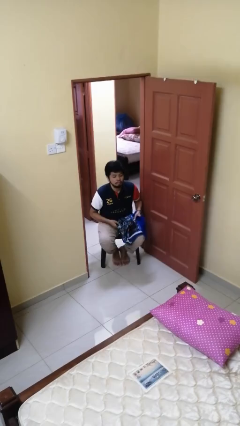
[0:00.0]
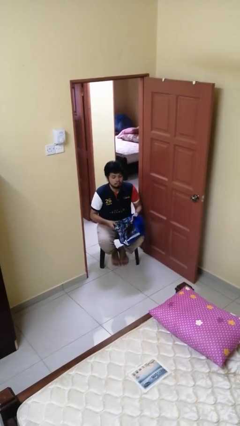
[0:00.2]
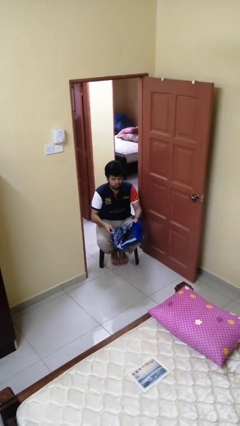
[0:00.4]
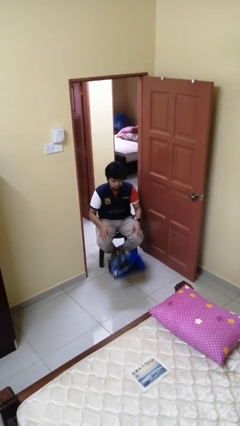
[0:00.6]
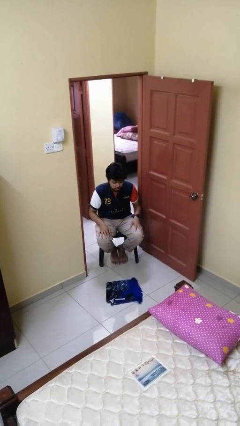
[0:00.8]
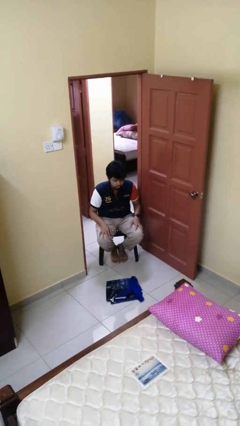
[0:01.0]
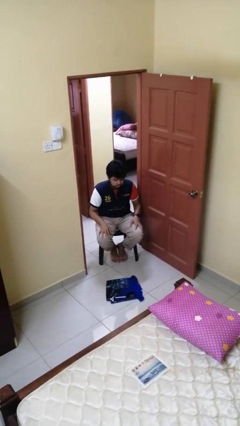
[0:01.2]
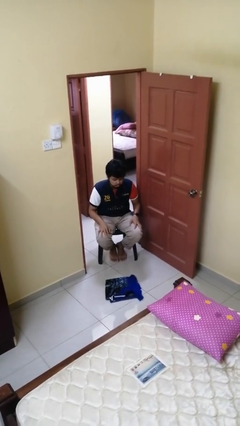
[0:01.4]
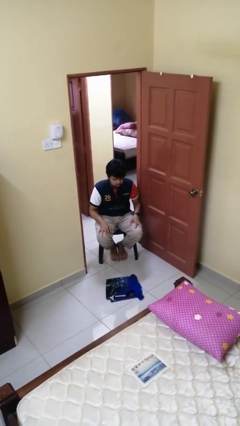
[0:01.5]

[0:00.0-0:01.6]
person drops object

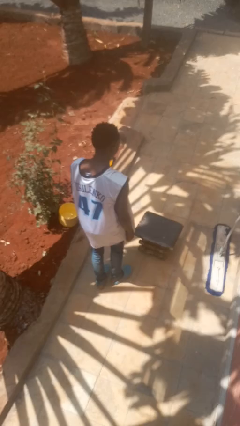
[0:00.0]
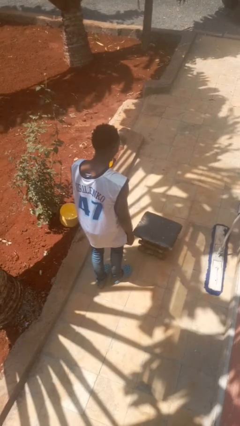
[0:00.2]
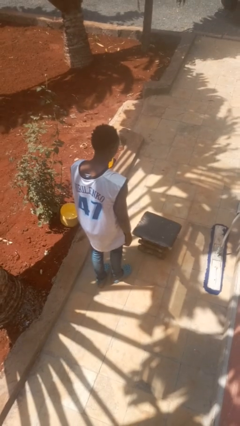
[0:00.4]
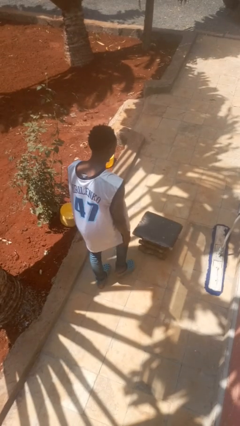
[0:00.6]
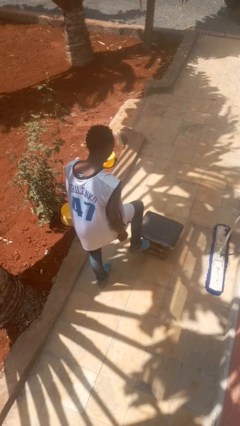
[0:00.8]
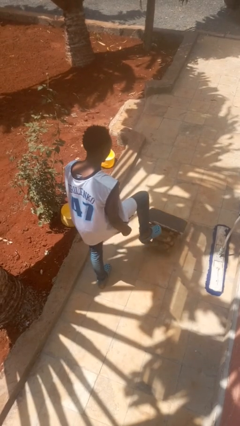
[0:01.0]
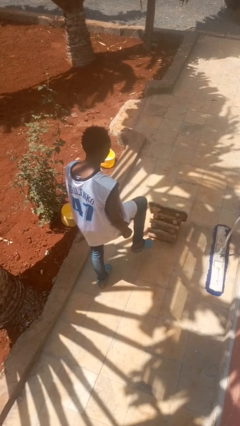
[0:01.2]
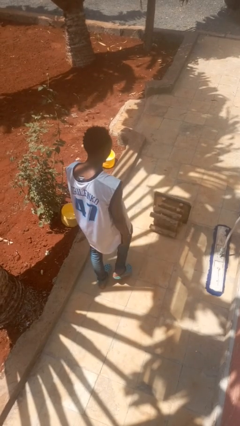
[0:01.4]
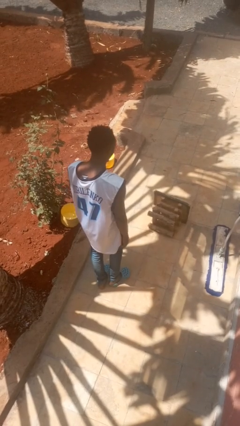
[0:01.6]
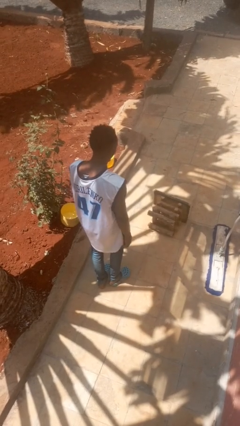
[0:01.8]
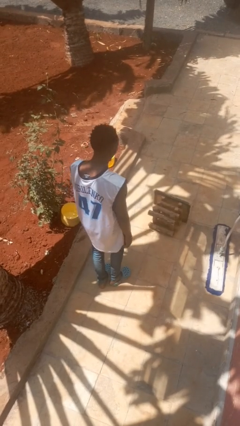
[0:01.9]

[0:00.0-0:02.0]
person knocks over furniture

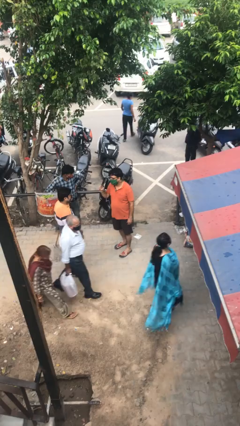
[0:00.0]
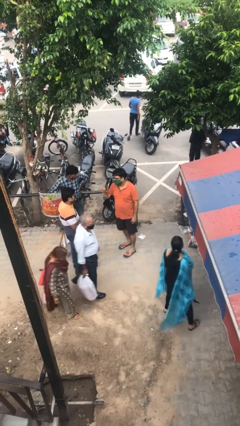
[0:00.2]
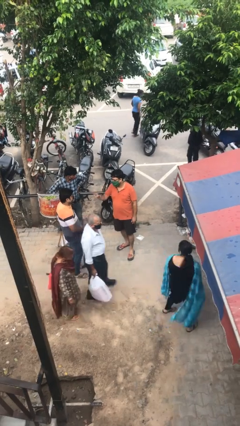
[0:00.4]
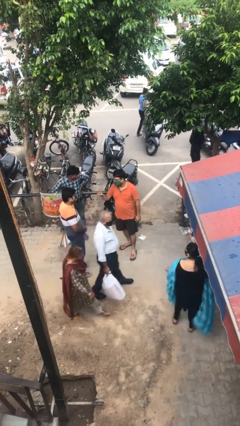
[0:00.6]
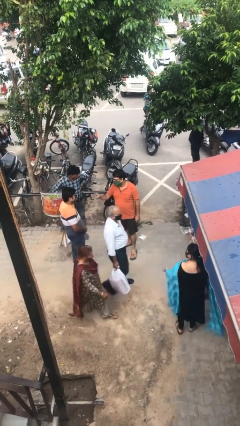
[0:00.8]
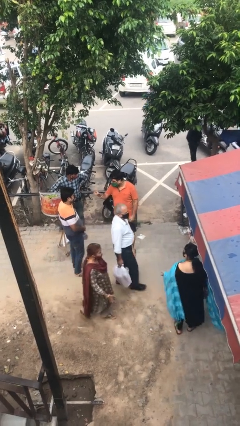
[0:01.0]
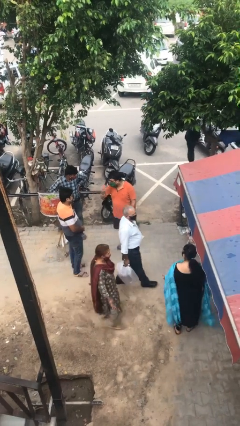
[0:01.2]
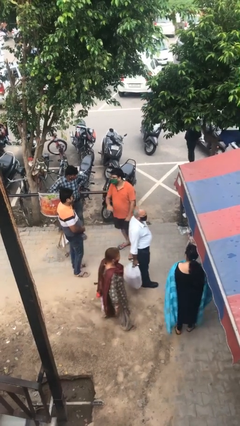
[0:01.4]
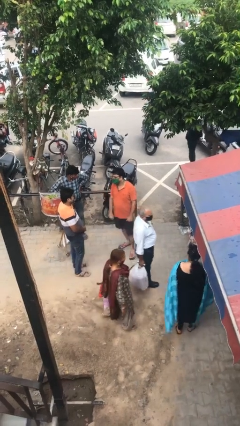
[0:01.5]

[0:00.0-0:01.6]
person points at person

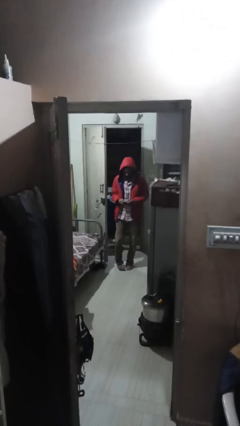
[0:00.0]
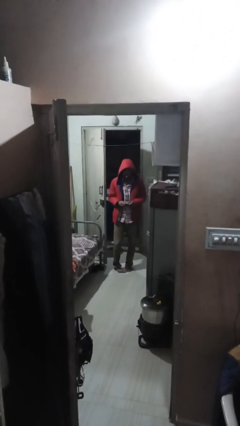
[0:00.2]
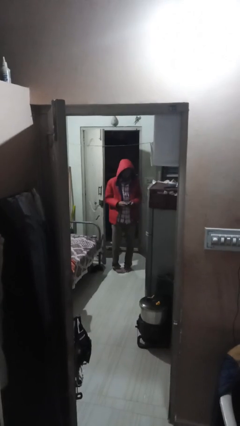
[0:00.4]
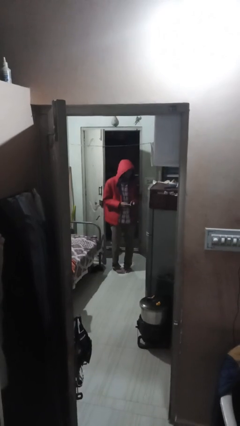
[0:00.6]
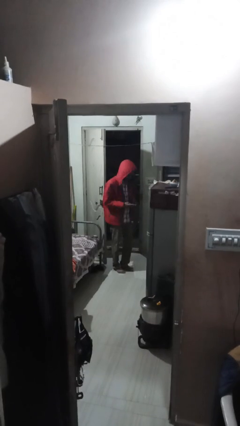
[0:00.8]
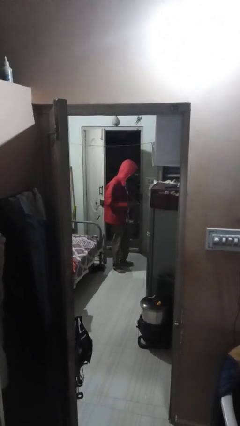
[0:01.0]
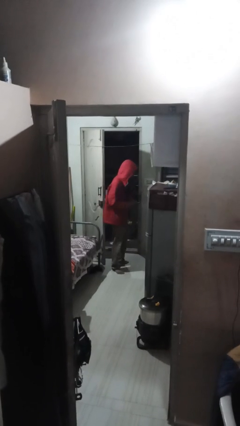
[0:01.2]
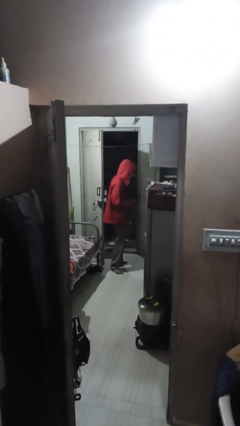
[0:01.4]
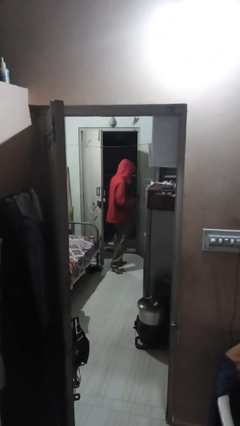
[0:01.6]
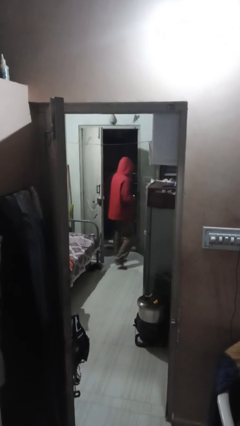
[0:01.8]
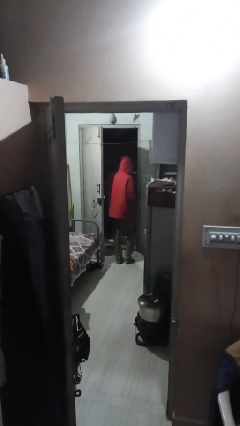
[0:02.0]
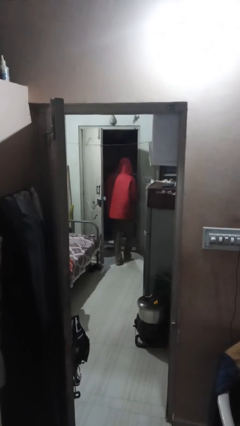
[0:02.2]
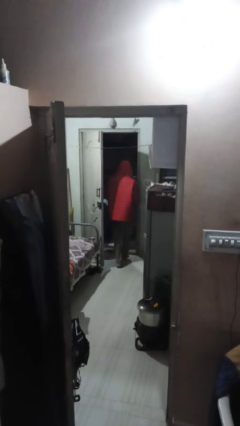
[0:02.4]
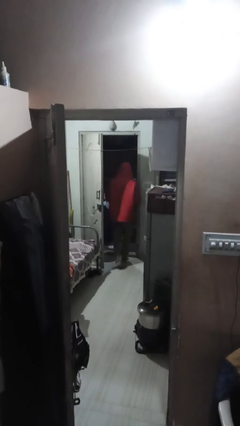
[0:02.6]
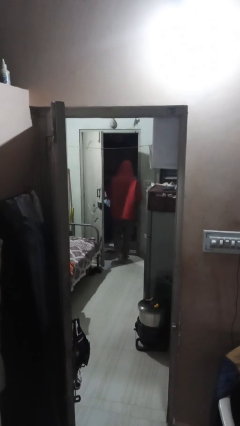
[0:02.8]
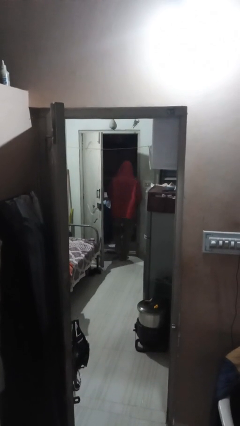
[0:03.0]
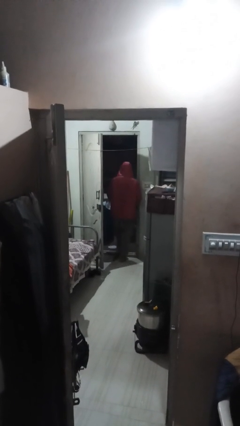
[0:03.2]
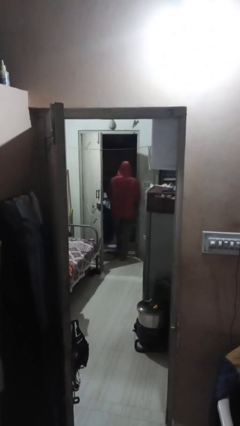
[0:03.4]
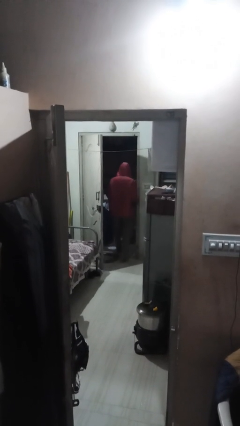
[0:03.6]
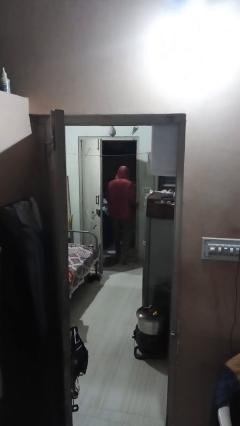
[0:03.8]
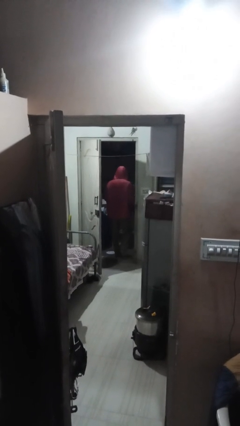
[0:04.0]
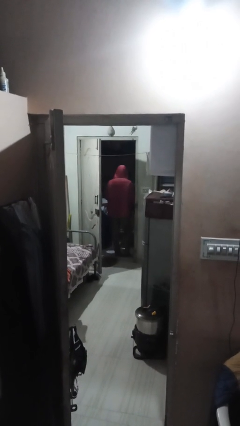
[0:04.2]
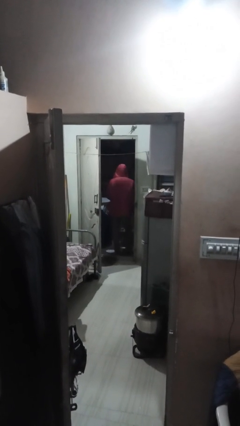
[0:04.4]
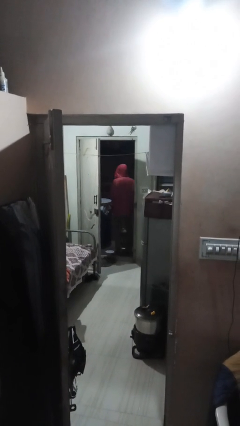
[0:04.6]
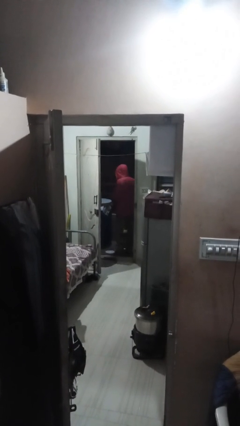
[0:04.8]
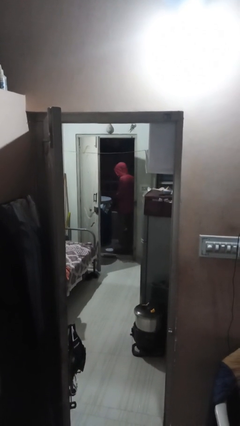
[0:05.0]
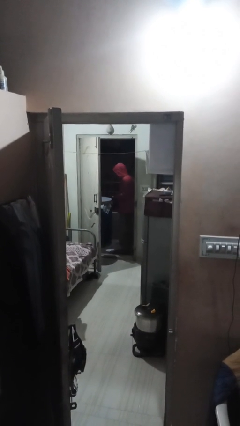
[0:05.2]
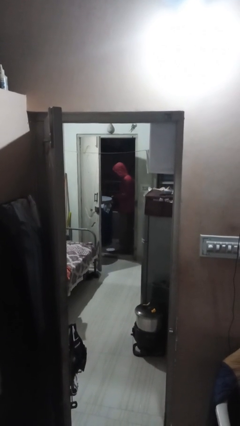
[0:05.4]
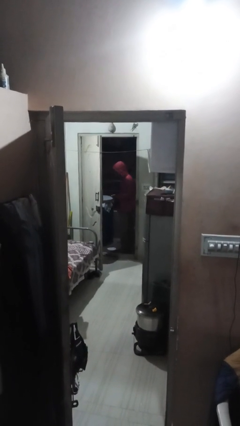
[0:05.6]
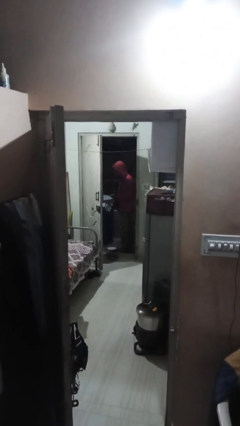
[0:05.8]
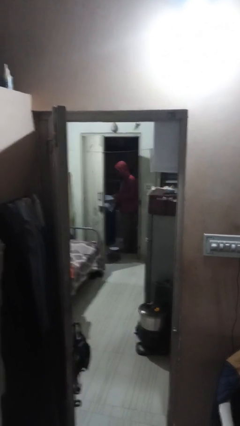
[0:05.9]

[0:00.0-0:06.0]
person exits scene through structure

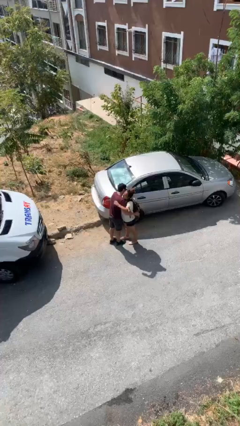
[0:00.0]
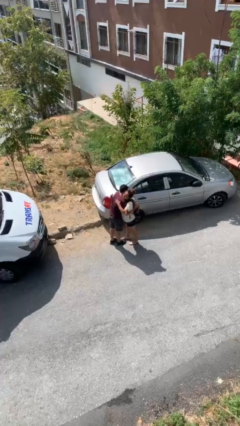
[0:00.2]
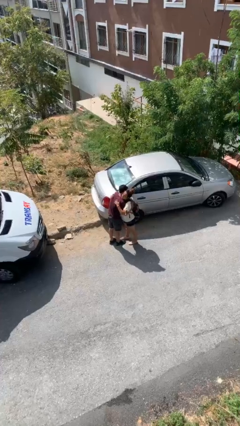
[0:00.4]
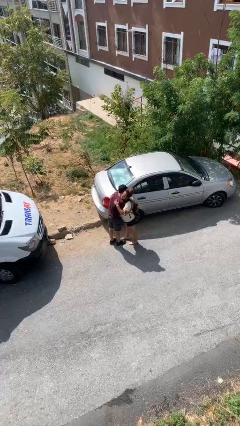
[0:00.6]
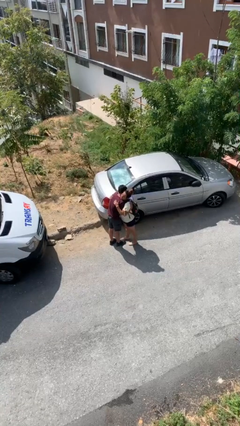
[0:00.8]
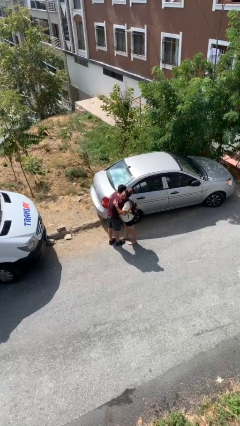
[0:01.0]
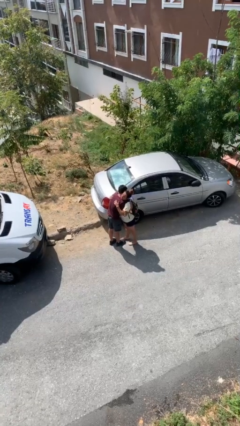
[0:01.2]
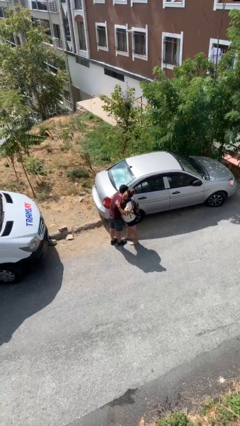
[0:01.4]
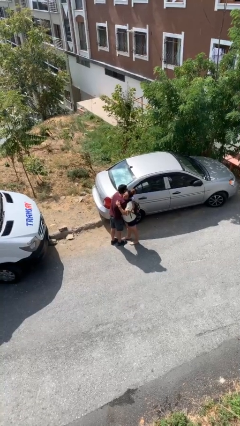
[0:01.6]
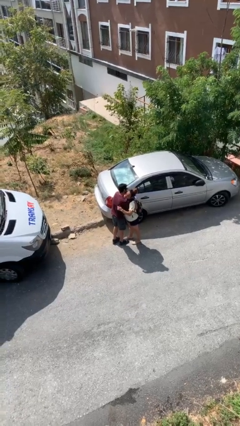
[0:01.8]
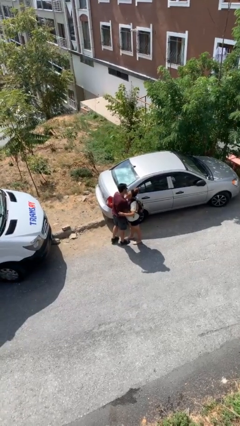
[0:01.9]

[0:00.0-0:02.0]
person embraces person

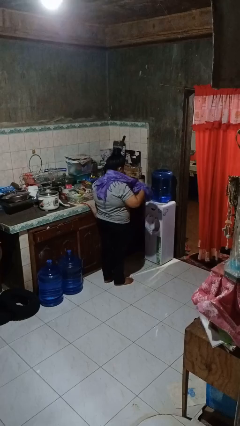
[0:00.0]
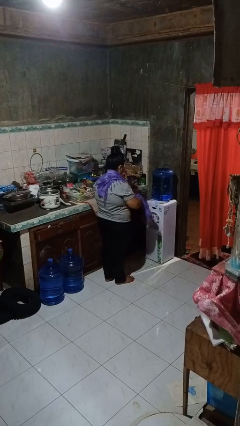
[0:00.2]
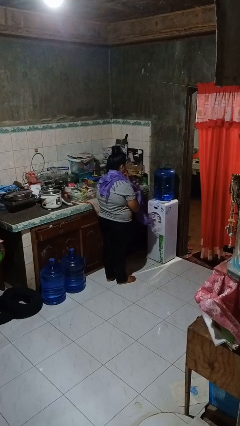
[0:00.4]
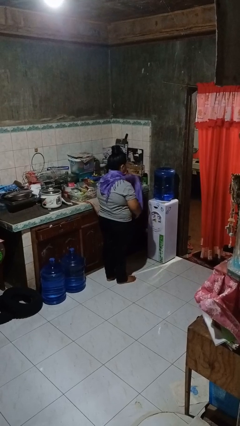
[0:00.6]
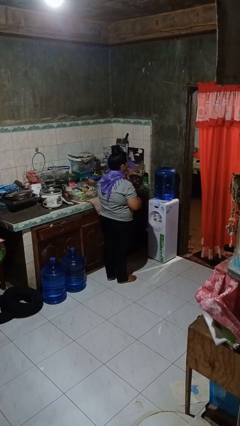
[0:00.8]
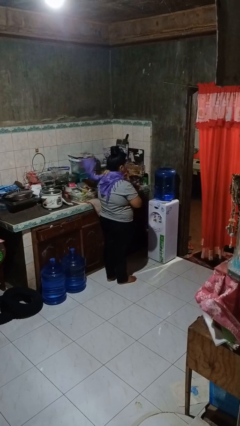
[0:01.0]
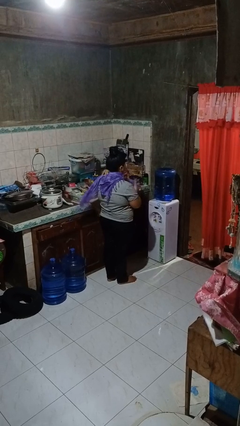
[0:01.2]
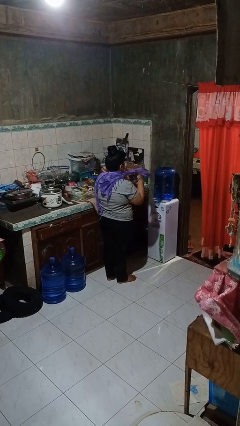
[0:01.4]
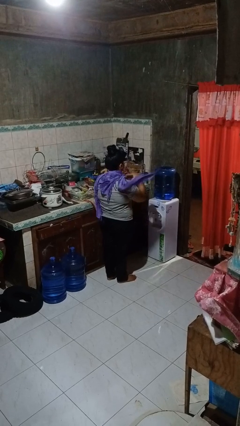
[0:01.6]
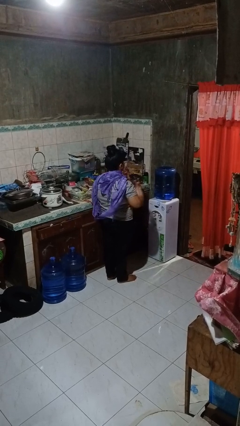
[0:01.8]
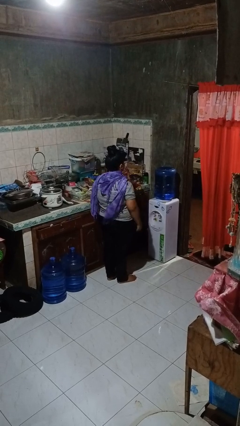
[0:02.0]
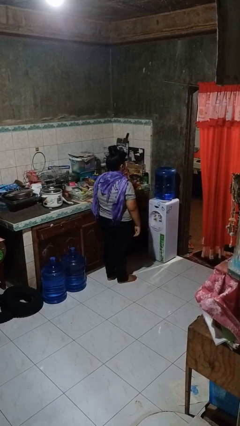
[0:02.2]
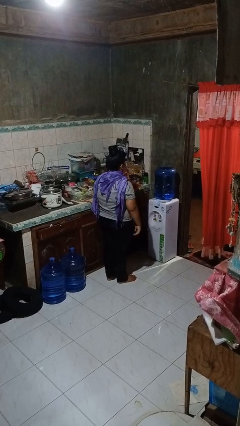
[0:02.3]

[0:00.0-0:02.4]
person puts on scarf

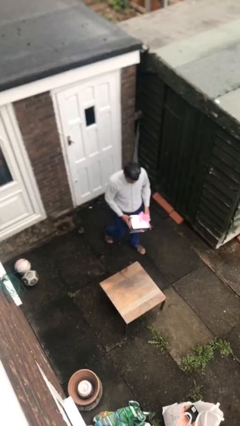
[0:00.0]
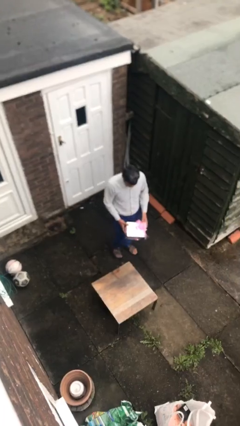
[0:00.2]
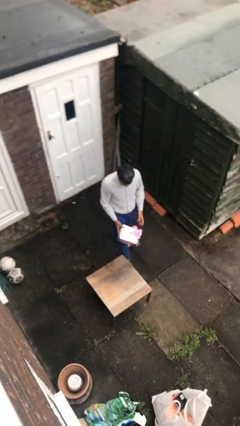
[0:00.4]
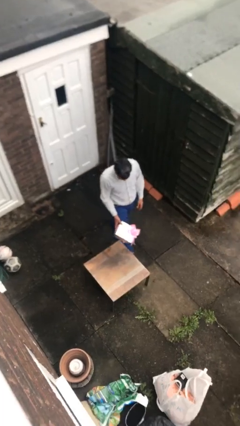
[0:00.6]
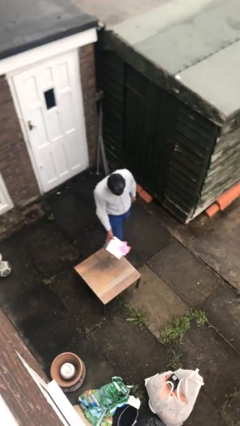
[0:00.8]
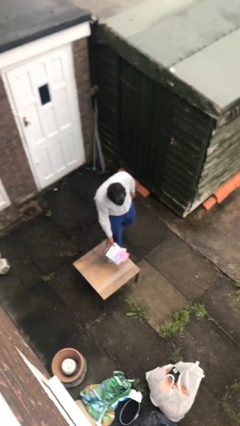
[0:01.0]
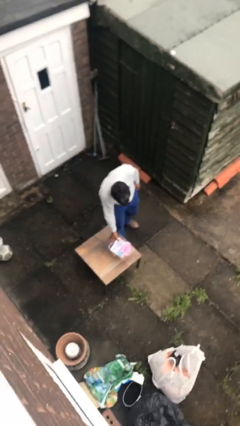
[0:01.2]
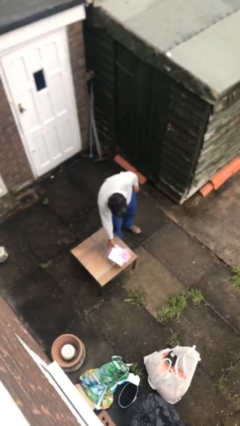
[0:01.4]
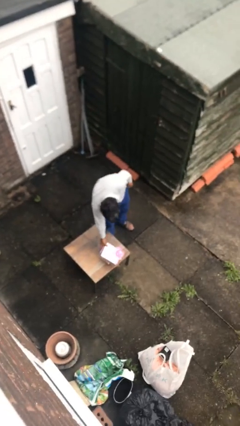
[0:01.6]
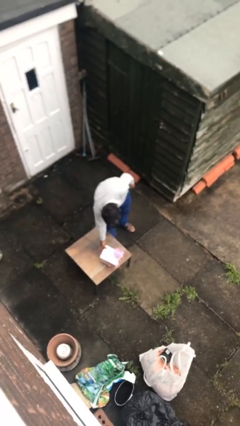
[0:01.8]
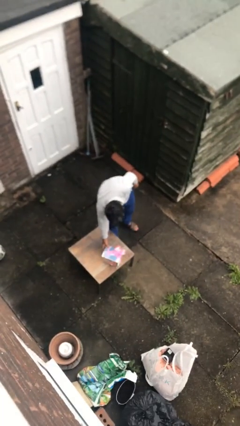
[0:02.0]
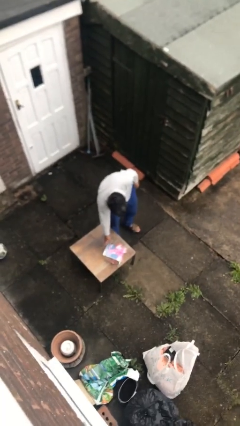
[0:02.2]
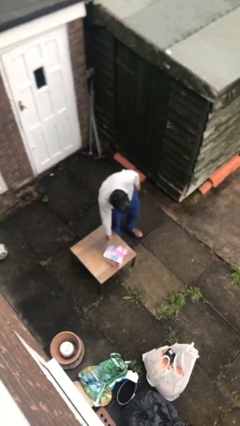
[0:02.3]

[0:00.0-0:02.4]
person puts down object on table
